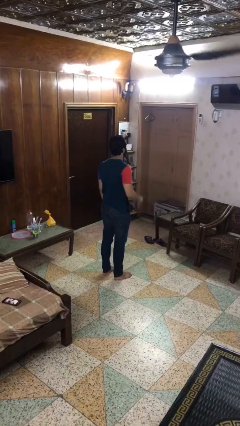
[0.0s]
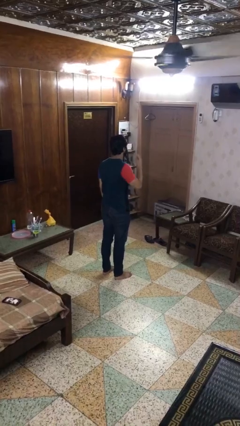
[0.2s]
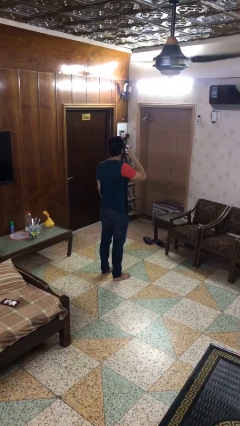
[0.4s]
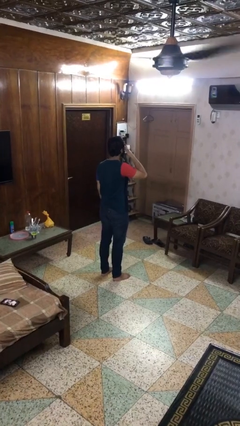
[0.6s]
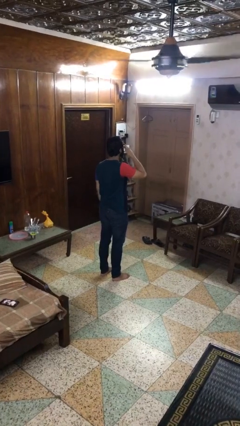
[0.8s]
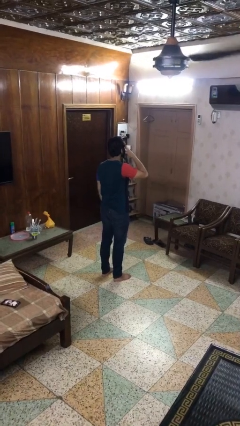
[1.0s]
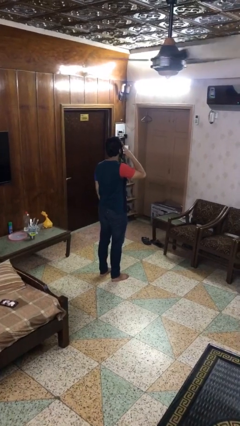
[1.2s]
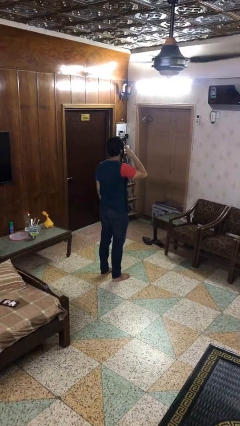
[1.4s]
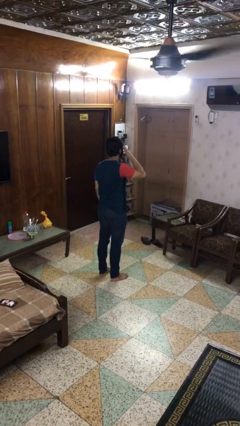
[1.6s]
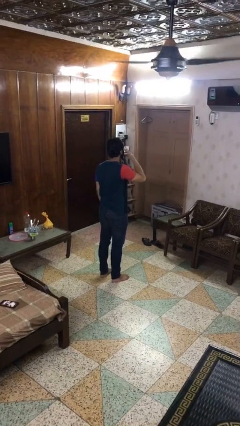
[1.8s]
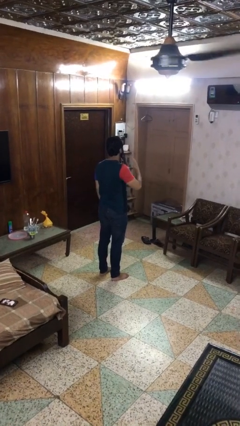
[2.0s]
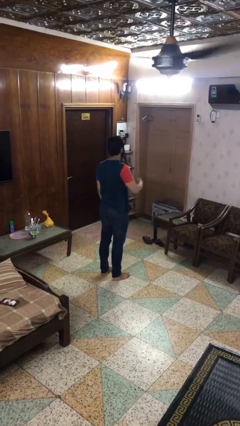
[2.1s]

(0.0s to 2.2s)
person rubs eyes

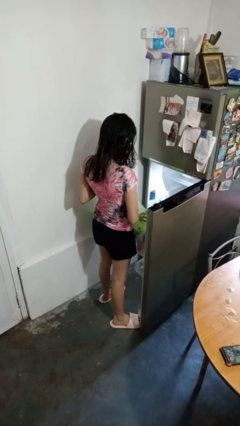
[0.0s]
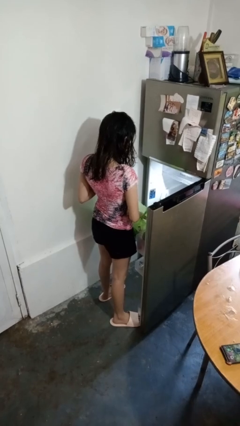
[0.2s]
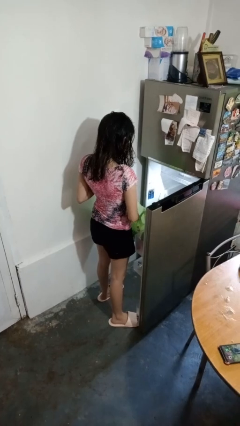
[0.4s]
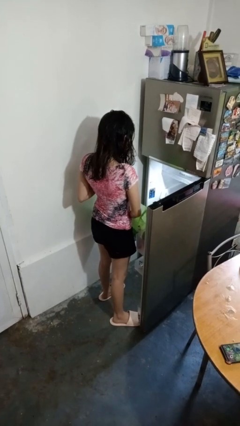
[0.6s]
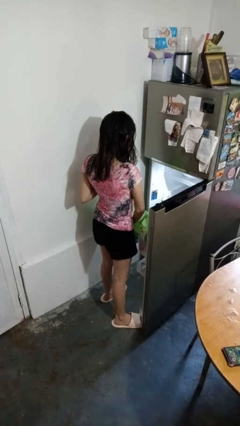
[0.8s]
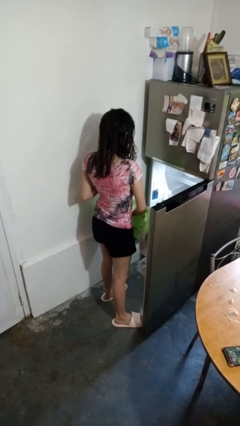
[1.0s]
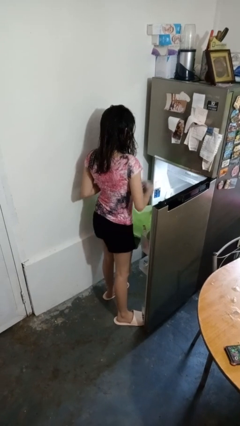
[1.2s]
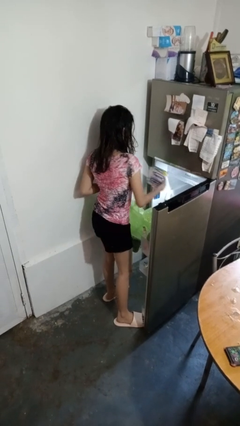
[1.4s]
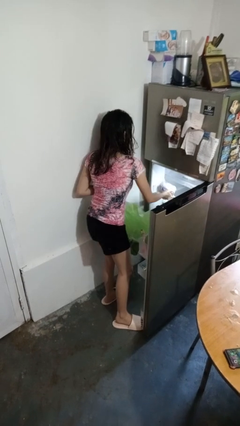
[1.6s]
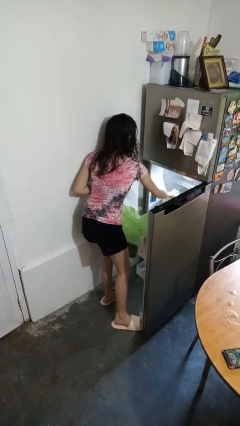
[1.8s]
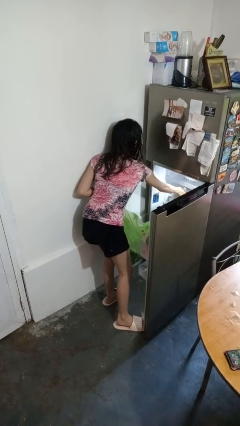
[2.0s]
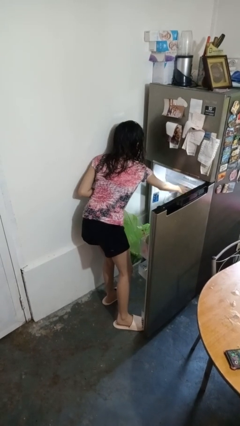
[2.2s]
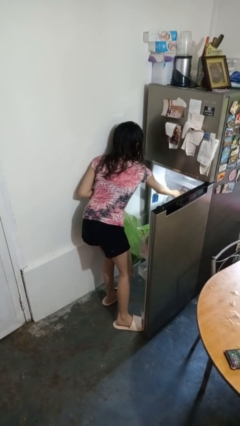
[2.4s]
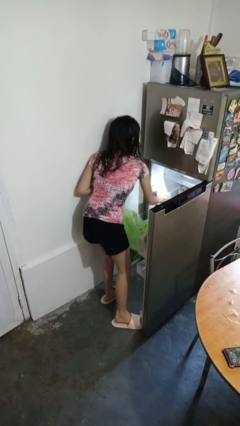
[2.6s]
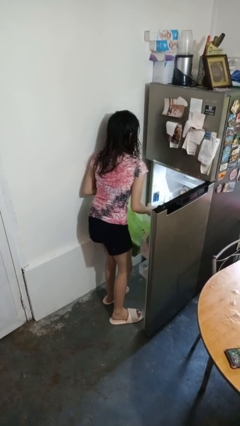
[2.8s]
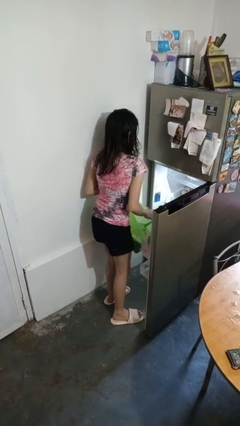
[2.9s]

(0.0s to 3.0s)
person loads groceries into refrigerator

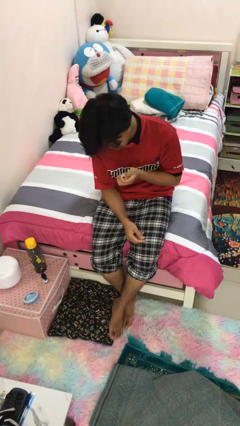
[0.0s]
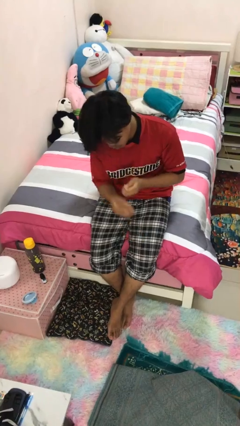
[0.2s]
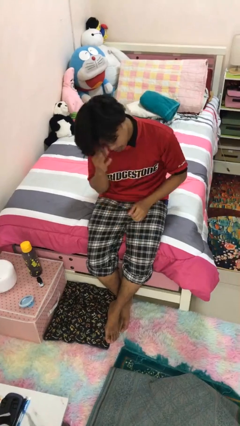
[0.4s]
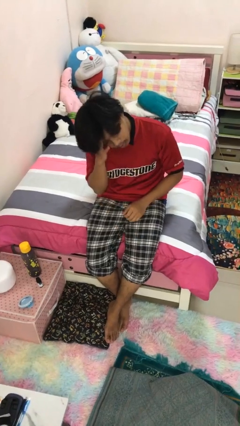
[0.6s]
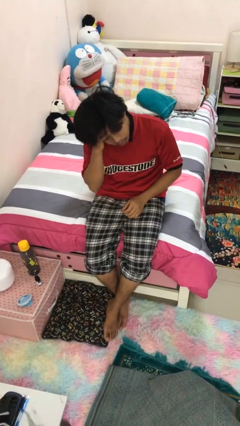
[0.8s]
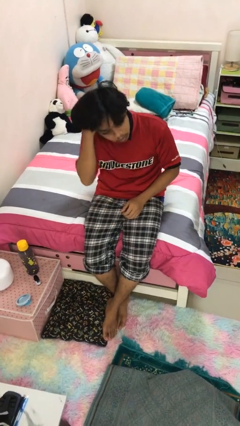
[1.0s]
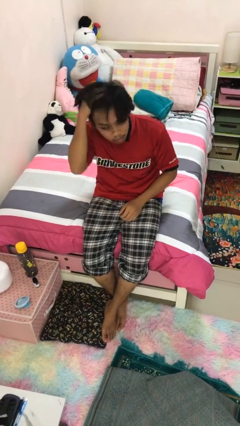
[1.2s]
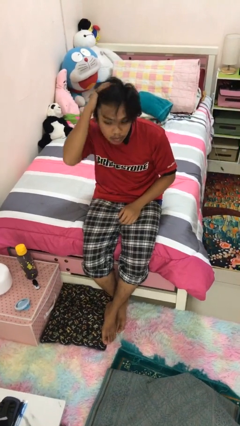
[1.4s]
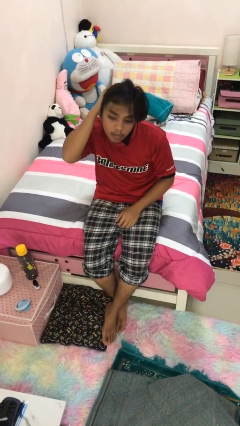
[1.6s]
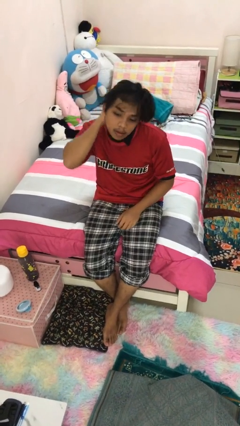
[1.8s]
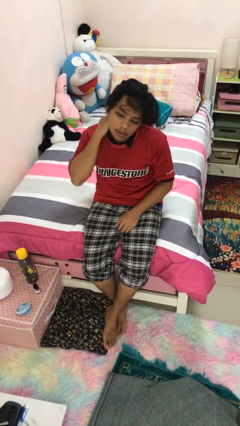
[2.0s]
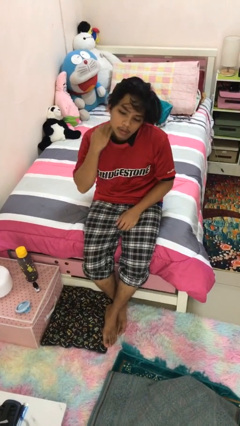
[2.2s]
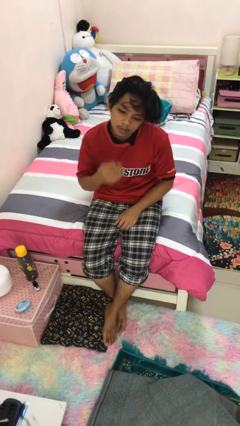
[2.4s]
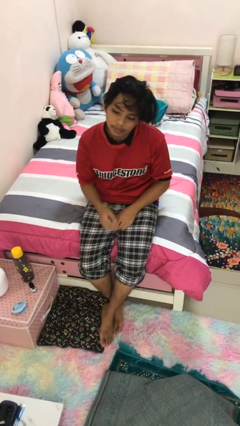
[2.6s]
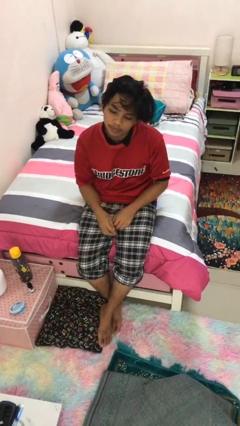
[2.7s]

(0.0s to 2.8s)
person strokes hair

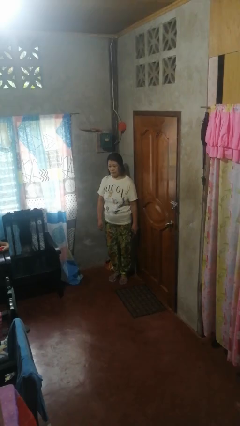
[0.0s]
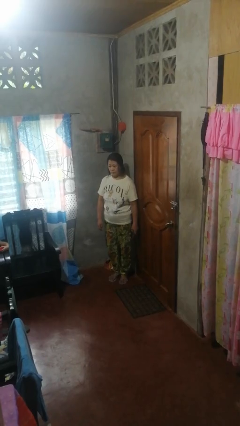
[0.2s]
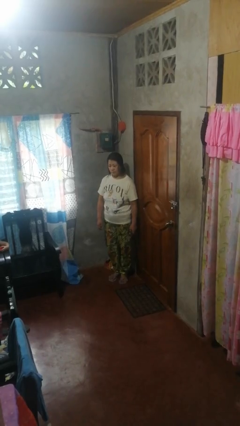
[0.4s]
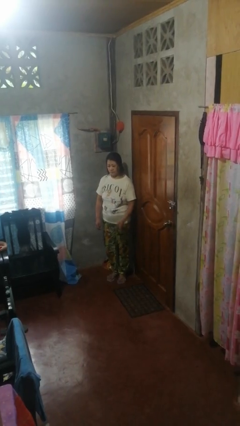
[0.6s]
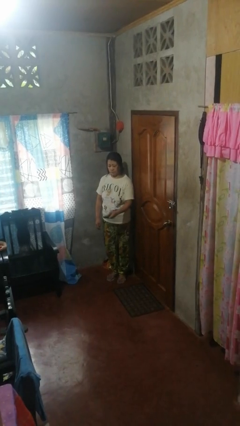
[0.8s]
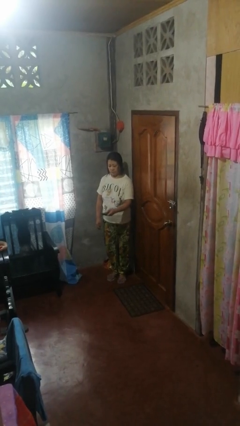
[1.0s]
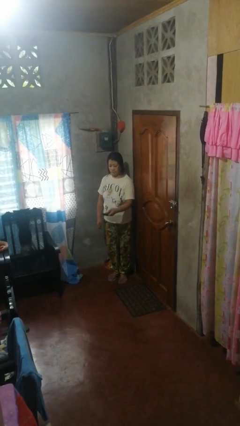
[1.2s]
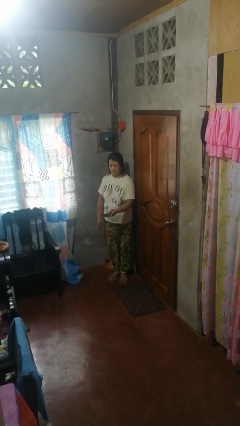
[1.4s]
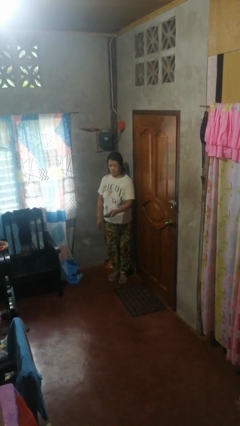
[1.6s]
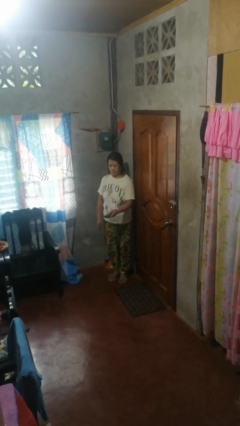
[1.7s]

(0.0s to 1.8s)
person uses television remote

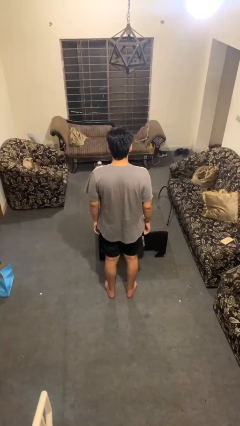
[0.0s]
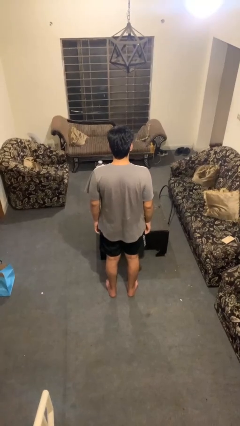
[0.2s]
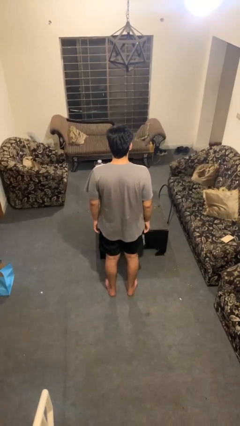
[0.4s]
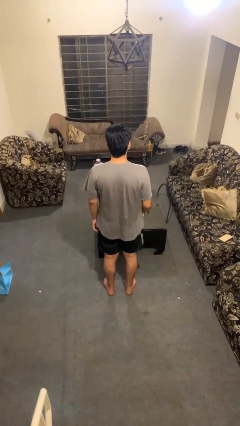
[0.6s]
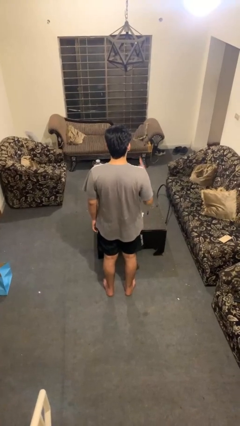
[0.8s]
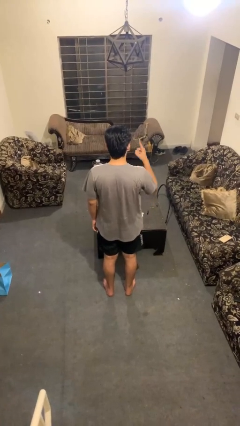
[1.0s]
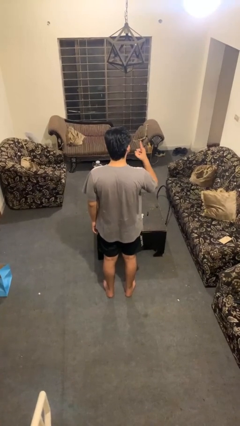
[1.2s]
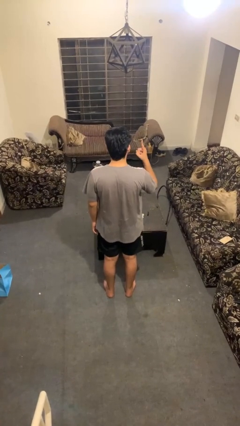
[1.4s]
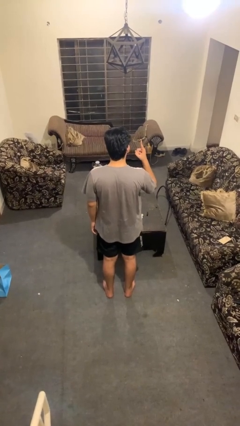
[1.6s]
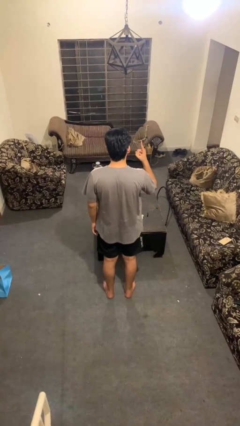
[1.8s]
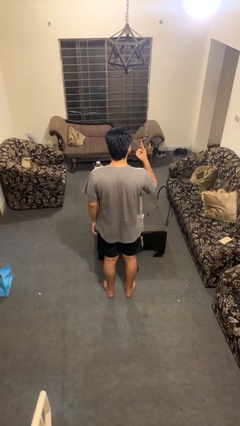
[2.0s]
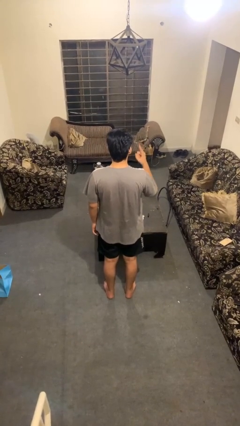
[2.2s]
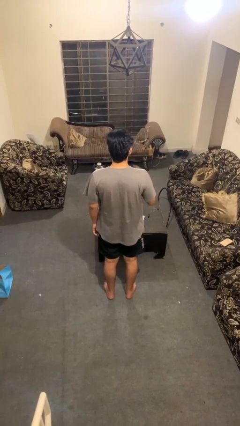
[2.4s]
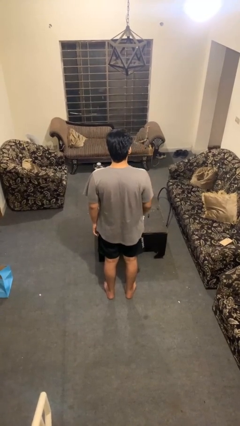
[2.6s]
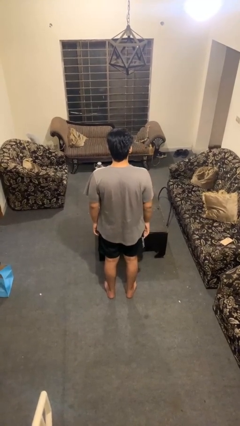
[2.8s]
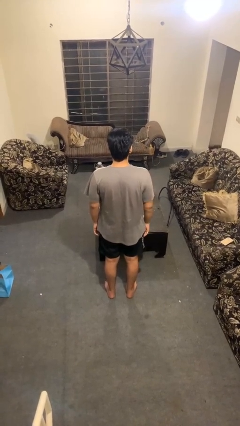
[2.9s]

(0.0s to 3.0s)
person gestures number one

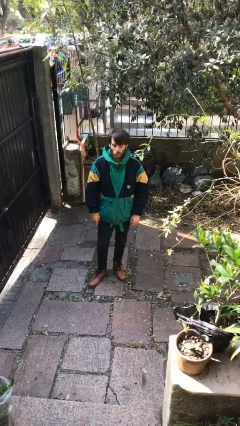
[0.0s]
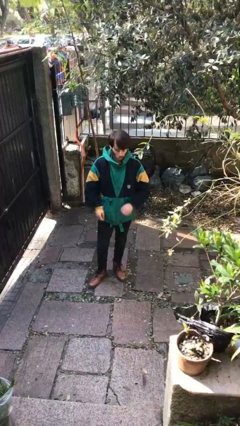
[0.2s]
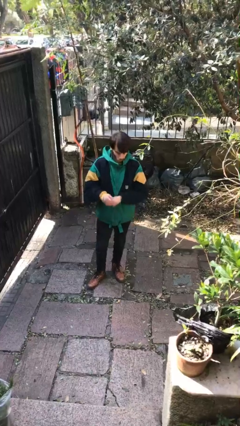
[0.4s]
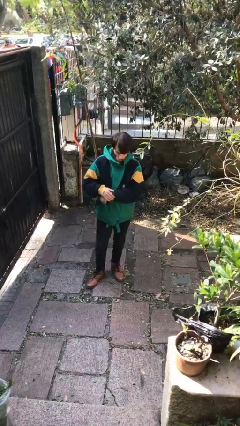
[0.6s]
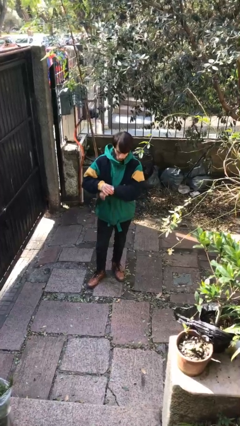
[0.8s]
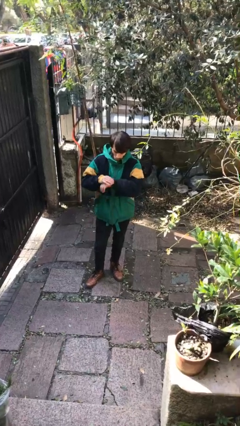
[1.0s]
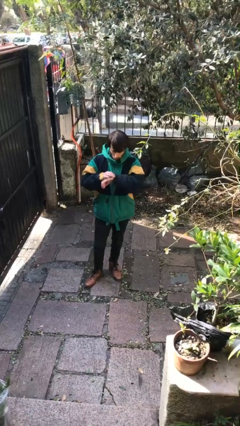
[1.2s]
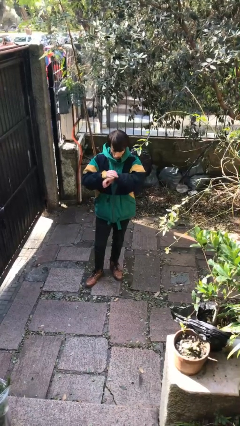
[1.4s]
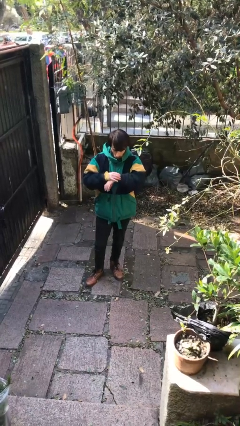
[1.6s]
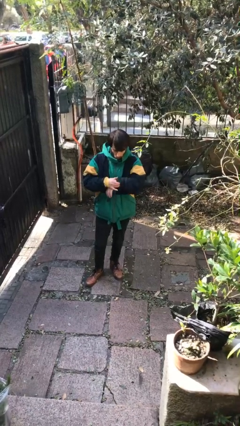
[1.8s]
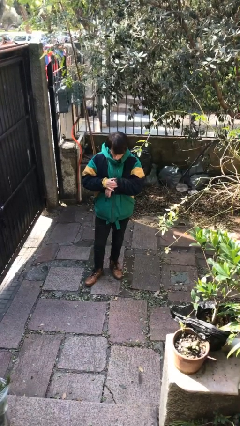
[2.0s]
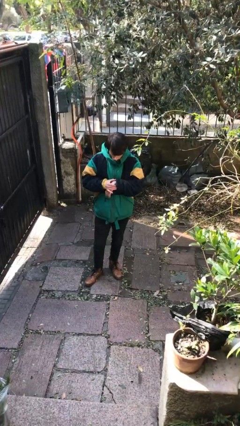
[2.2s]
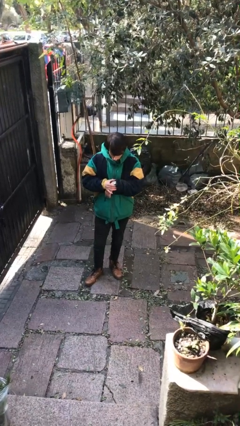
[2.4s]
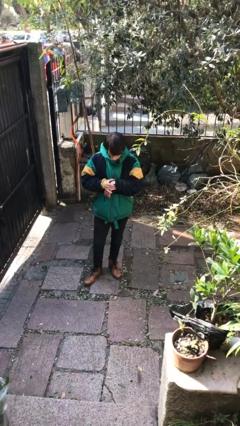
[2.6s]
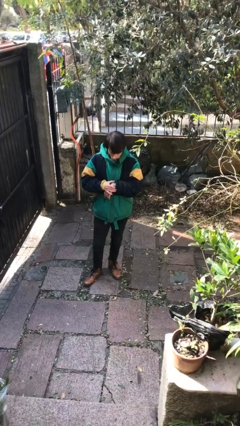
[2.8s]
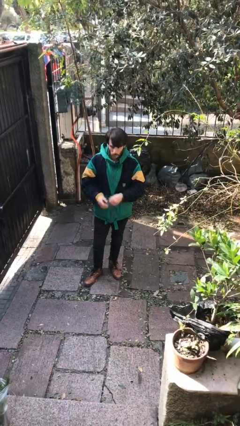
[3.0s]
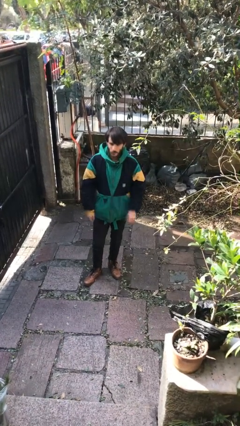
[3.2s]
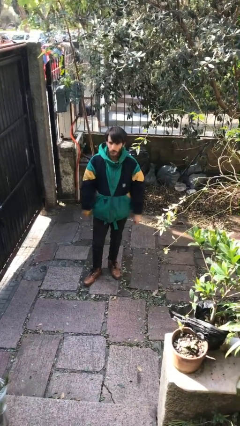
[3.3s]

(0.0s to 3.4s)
person looks at wristwatch

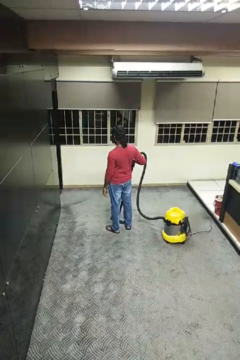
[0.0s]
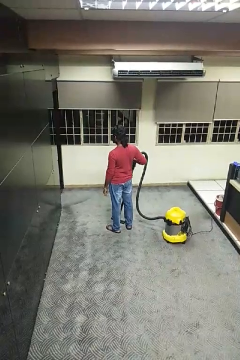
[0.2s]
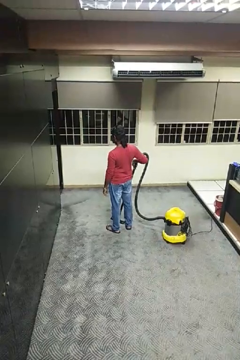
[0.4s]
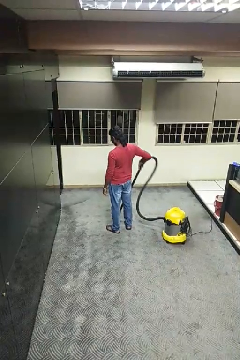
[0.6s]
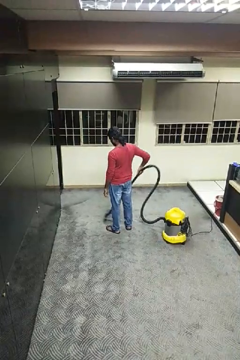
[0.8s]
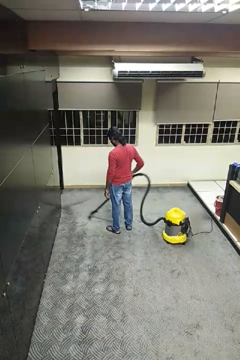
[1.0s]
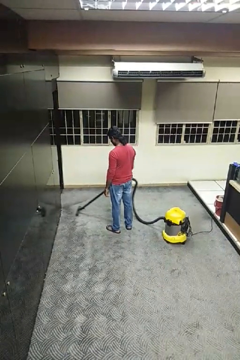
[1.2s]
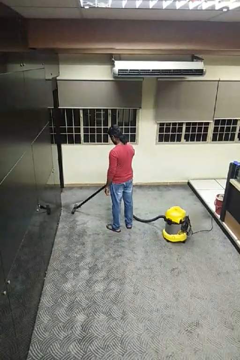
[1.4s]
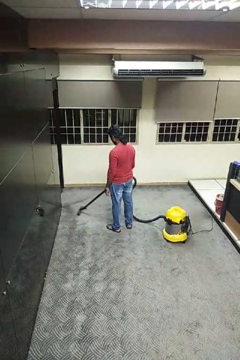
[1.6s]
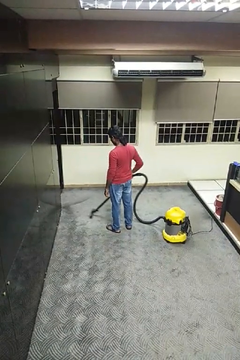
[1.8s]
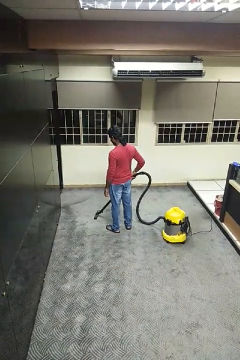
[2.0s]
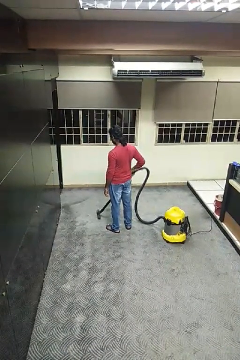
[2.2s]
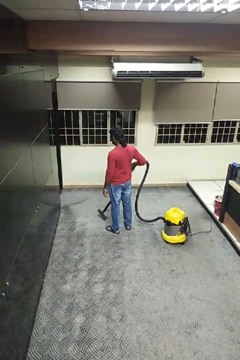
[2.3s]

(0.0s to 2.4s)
person vacuums carpet
